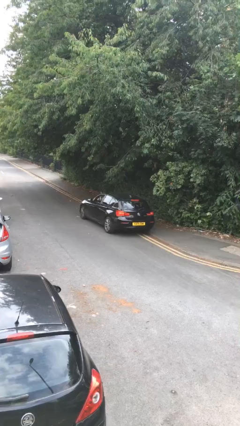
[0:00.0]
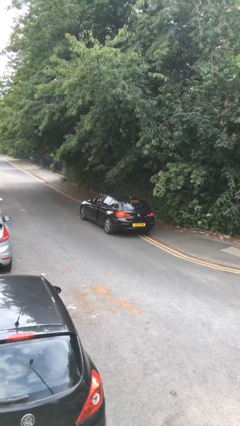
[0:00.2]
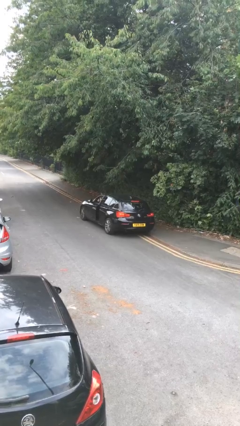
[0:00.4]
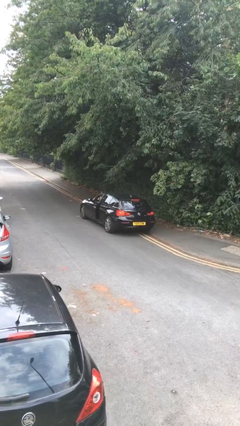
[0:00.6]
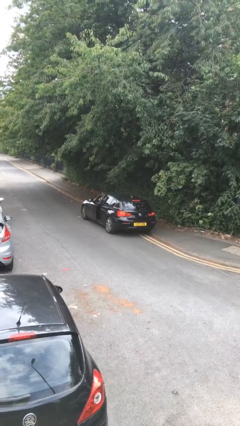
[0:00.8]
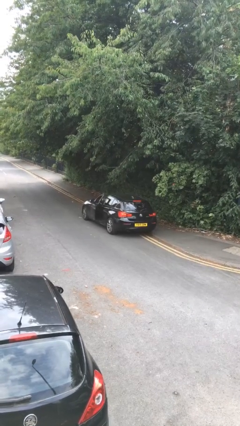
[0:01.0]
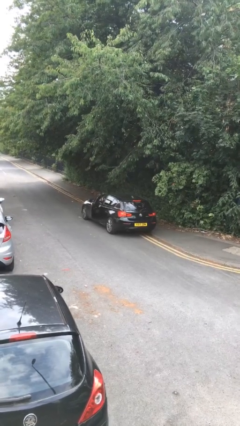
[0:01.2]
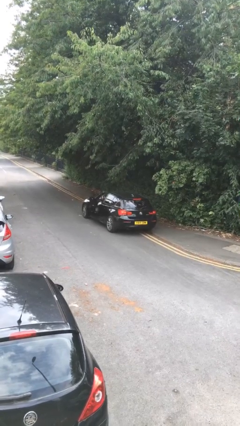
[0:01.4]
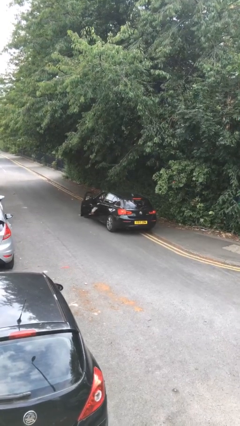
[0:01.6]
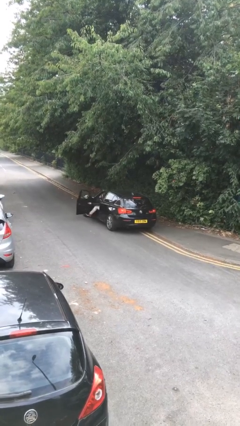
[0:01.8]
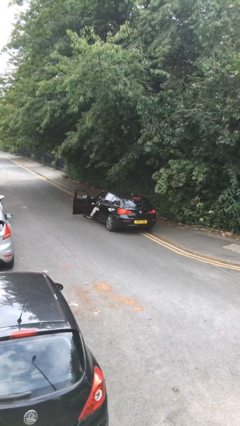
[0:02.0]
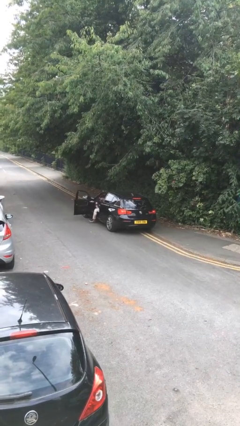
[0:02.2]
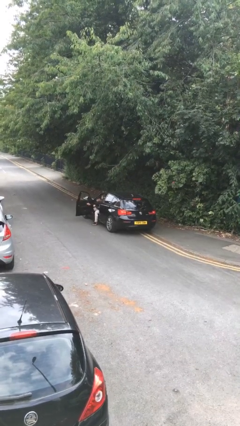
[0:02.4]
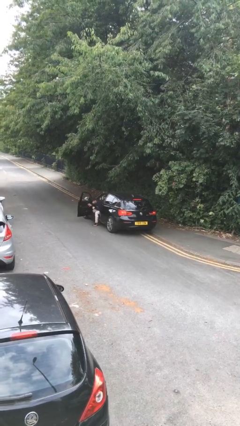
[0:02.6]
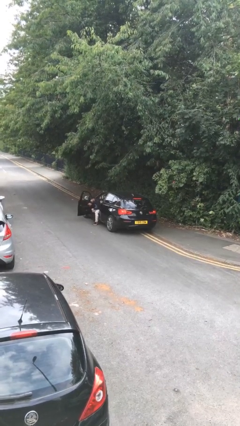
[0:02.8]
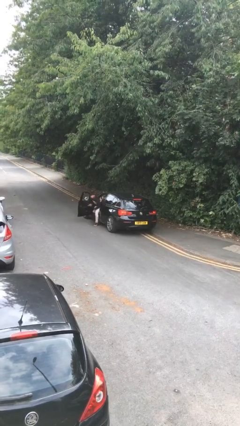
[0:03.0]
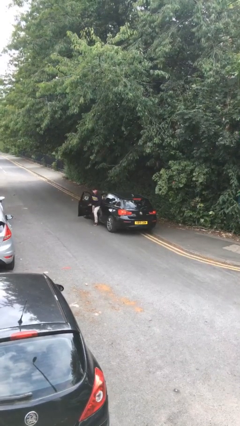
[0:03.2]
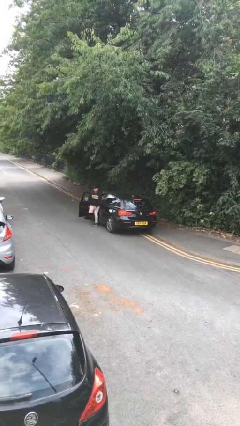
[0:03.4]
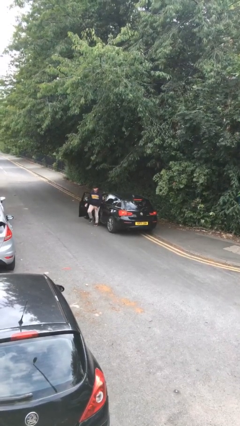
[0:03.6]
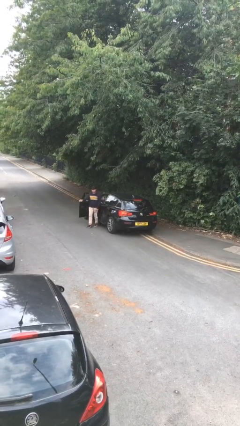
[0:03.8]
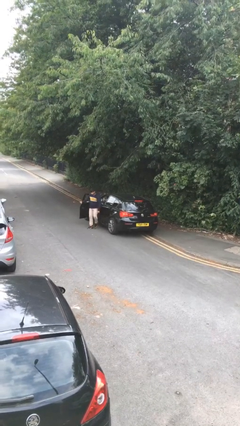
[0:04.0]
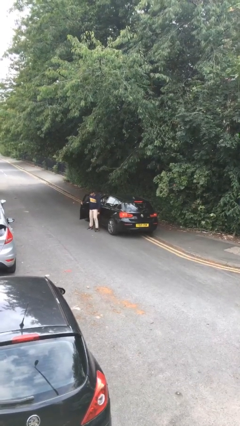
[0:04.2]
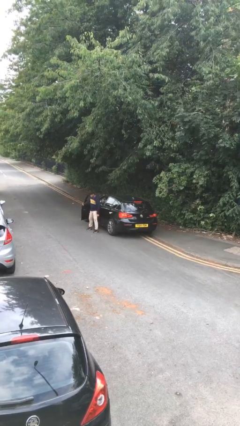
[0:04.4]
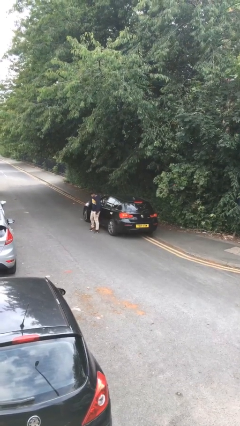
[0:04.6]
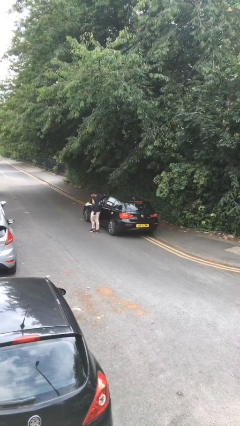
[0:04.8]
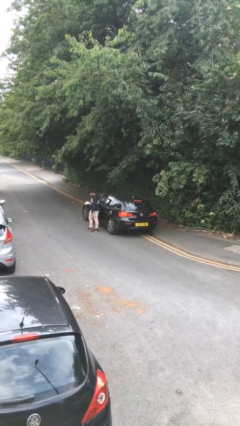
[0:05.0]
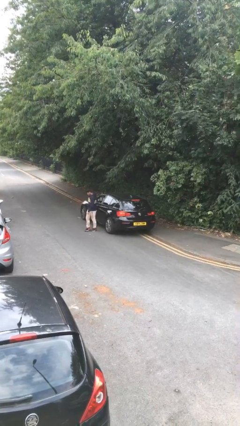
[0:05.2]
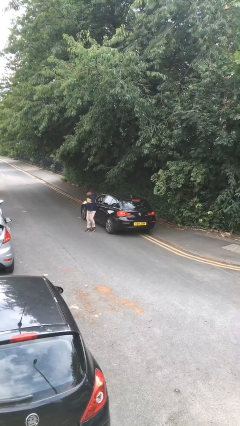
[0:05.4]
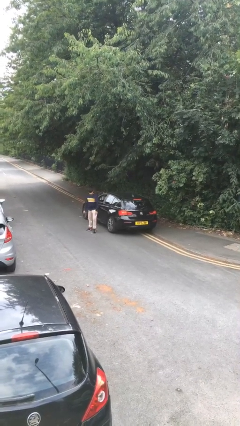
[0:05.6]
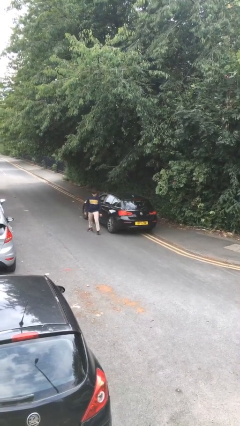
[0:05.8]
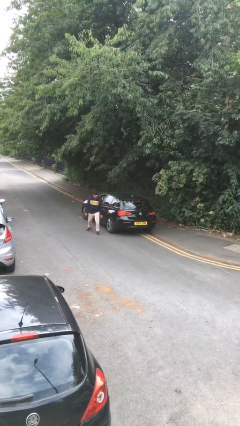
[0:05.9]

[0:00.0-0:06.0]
car drops off person

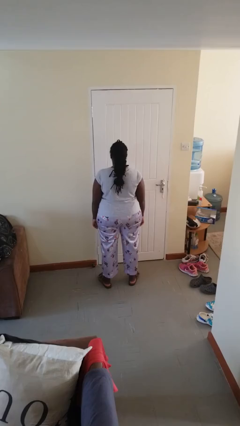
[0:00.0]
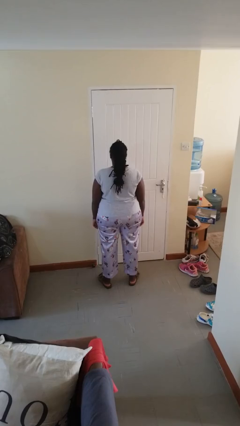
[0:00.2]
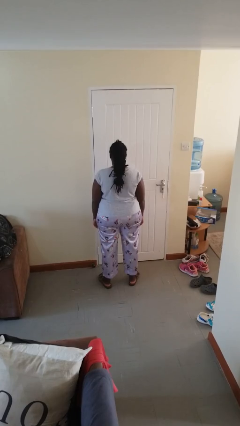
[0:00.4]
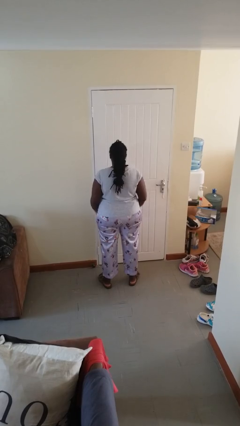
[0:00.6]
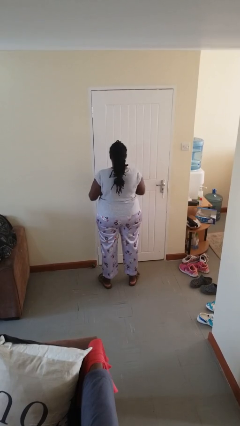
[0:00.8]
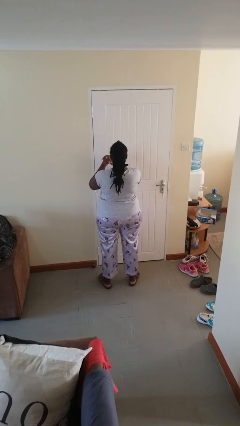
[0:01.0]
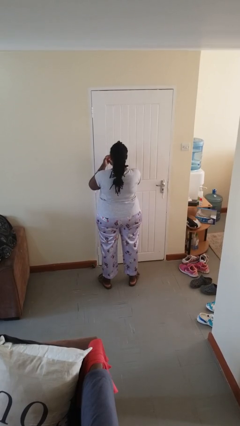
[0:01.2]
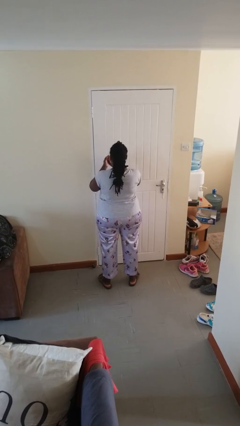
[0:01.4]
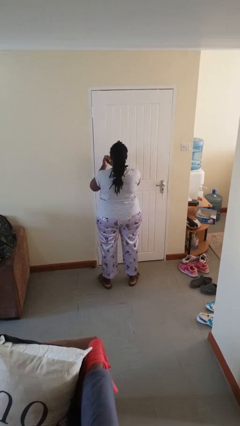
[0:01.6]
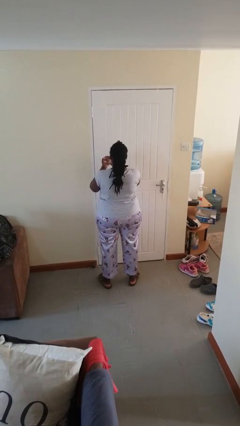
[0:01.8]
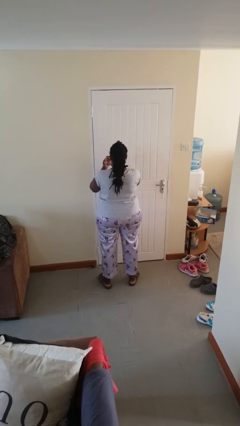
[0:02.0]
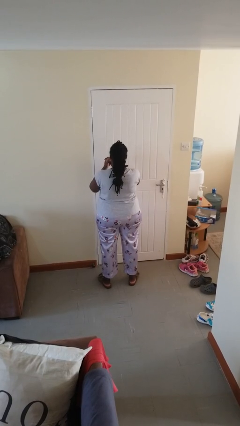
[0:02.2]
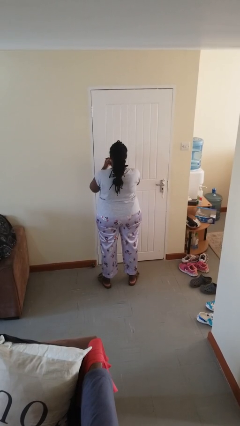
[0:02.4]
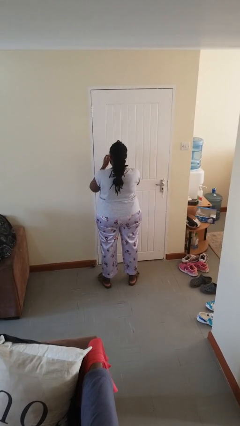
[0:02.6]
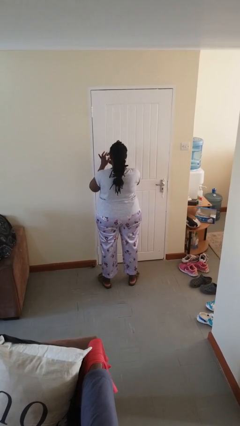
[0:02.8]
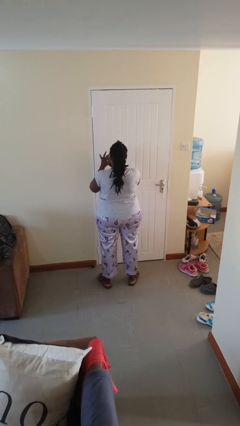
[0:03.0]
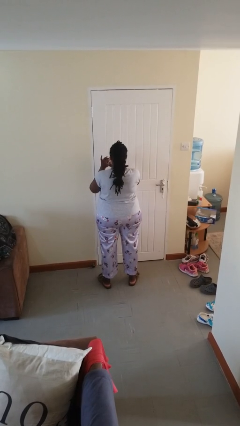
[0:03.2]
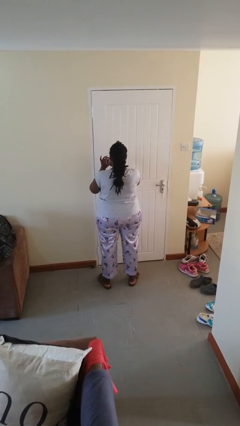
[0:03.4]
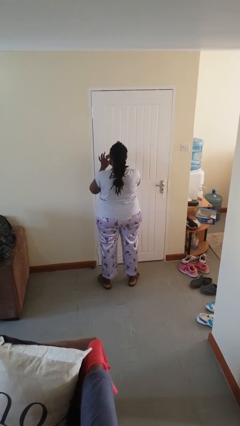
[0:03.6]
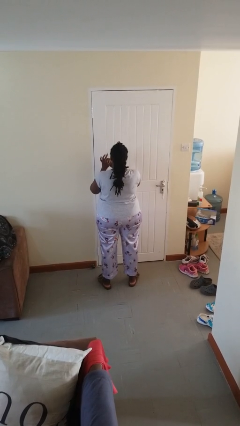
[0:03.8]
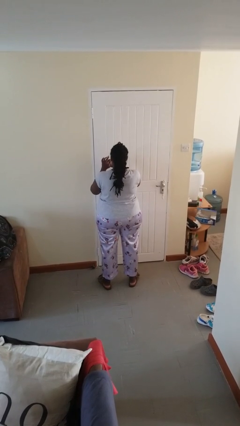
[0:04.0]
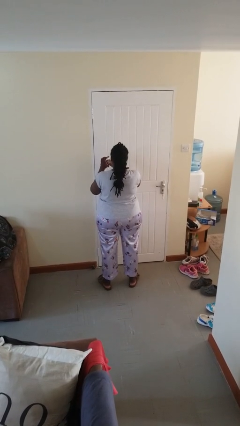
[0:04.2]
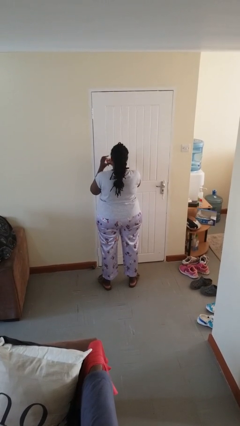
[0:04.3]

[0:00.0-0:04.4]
person cracks knuckles

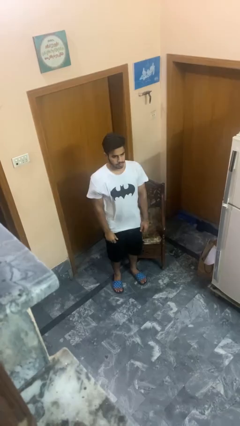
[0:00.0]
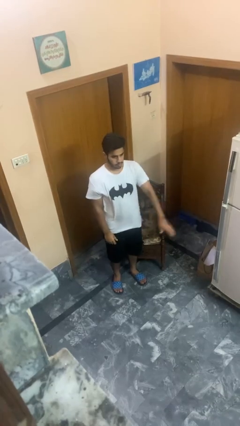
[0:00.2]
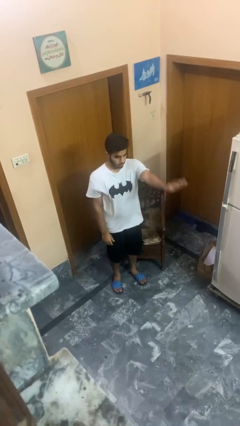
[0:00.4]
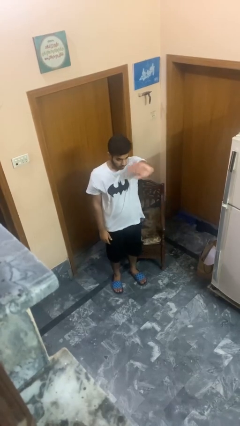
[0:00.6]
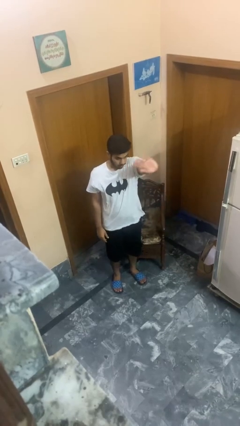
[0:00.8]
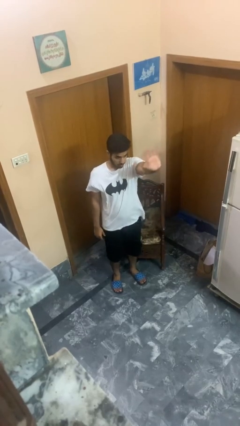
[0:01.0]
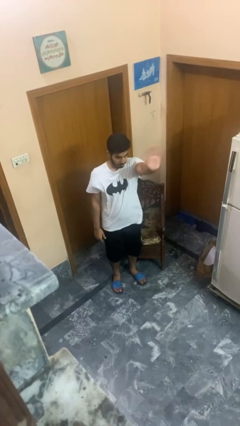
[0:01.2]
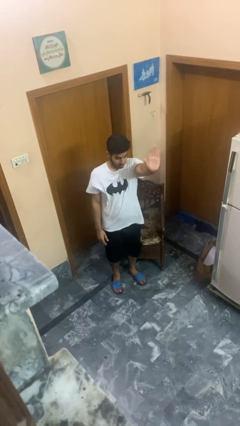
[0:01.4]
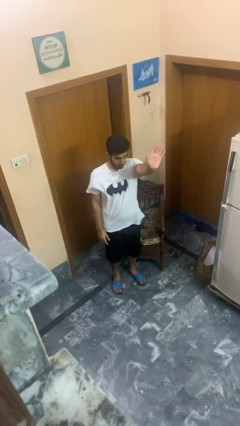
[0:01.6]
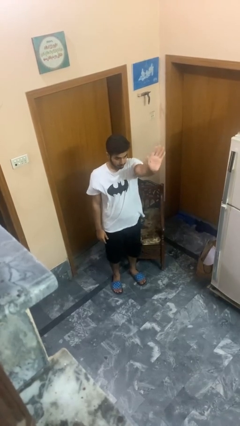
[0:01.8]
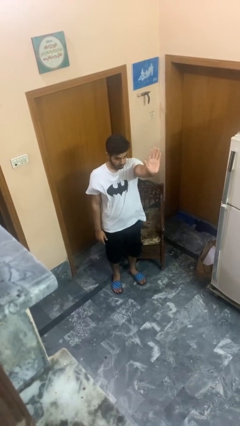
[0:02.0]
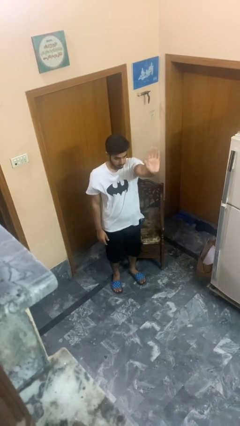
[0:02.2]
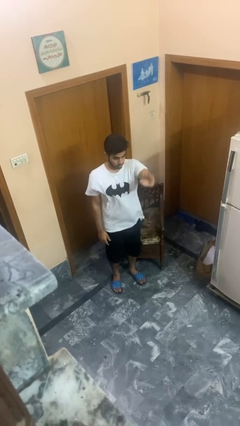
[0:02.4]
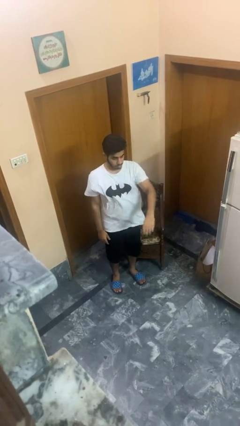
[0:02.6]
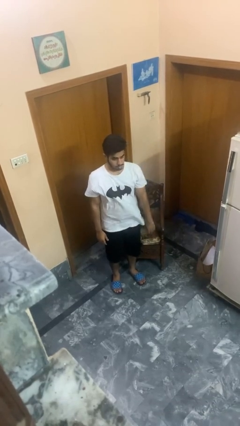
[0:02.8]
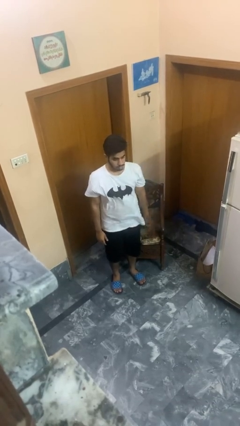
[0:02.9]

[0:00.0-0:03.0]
person waves at person

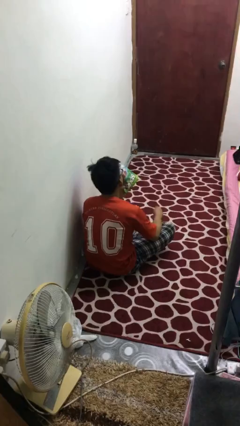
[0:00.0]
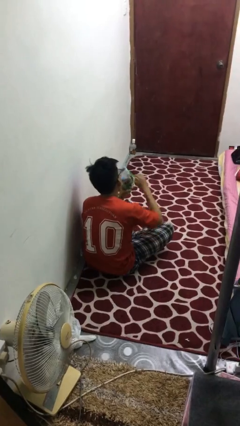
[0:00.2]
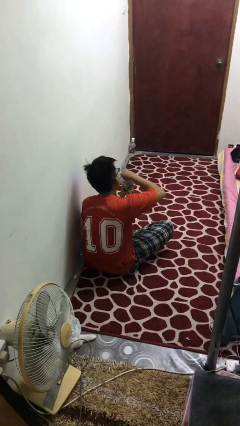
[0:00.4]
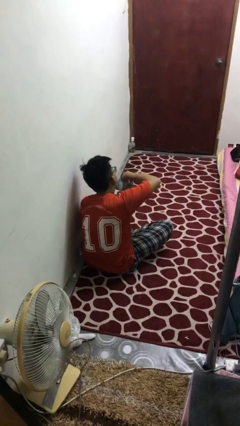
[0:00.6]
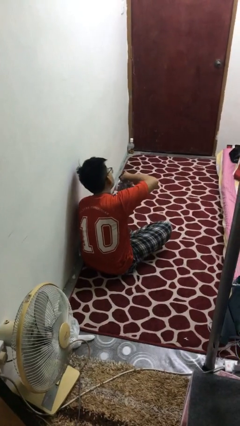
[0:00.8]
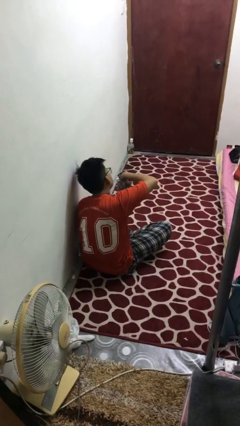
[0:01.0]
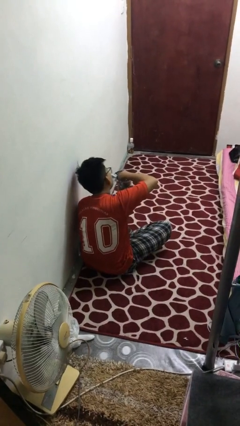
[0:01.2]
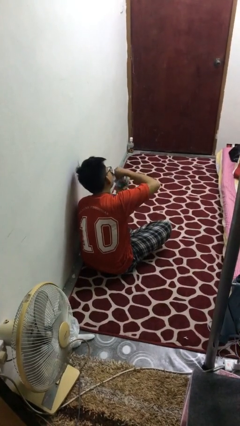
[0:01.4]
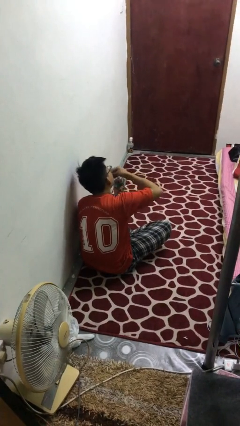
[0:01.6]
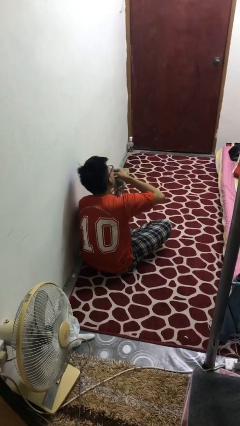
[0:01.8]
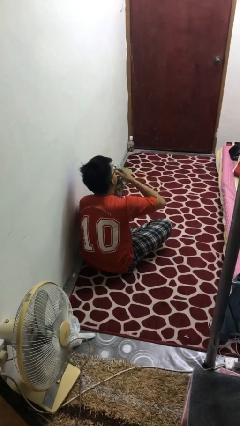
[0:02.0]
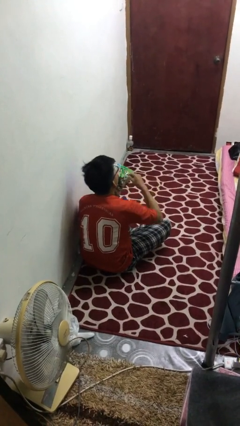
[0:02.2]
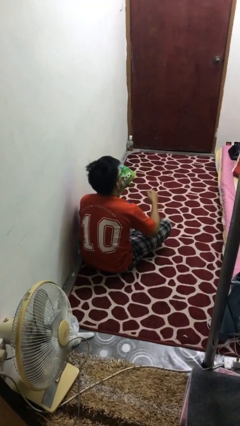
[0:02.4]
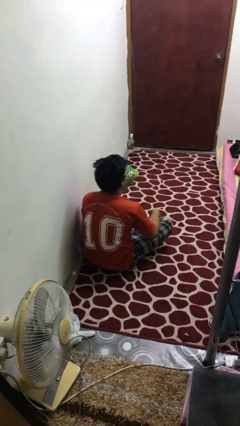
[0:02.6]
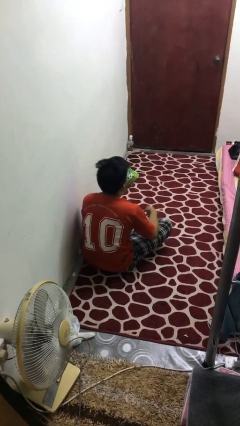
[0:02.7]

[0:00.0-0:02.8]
person eats snack from bag

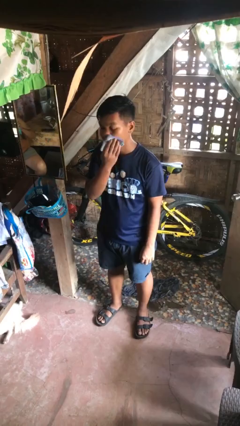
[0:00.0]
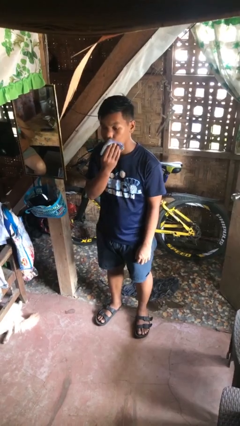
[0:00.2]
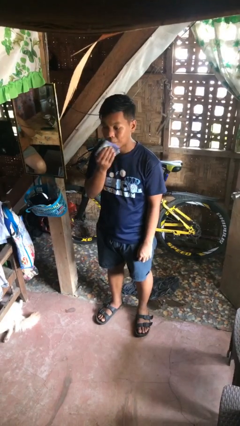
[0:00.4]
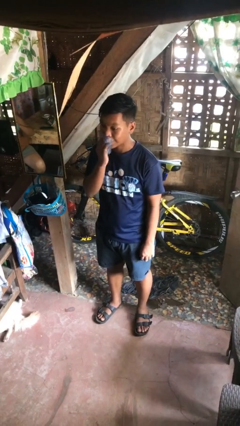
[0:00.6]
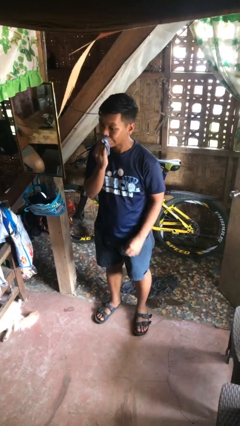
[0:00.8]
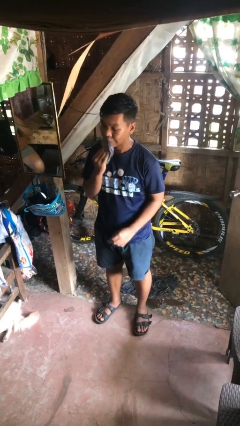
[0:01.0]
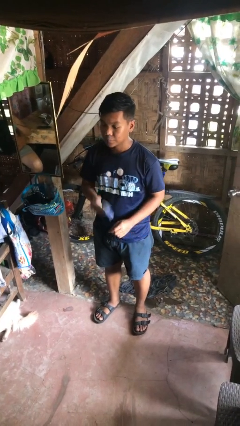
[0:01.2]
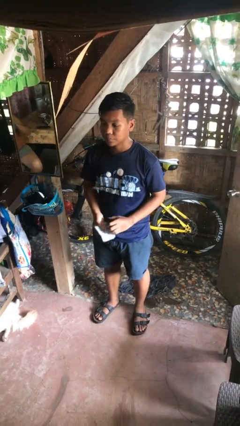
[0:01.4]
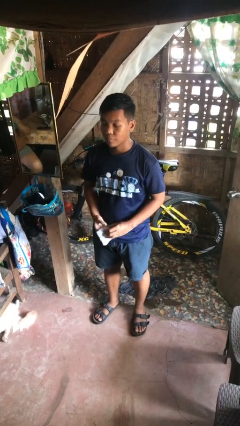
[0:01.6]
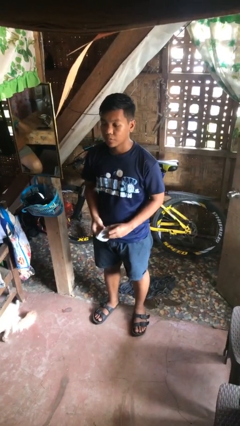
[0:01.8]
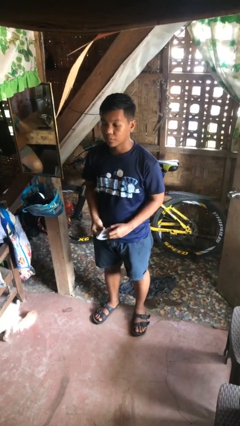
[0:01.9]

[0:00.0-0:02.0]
person wipes mouth with napkin
